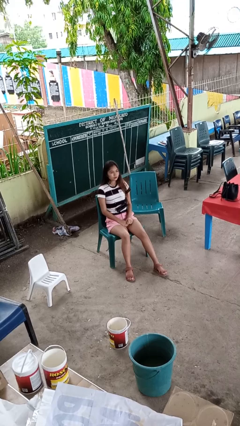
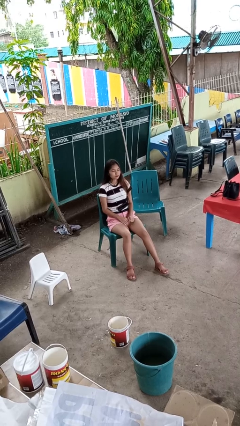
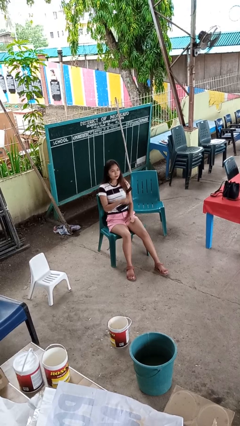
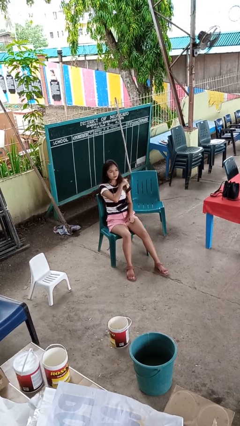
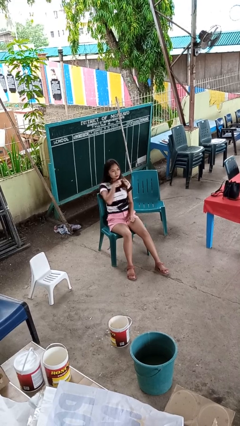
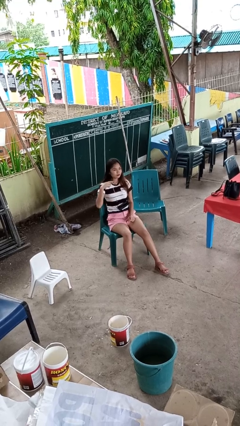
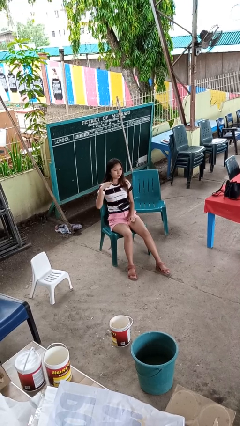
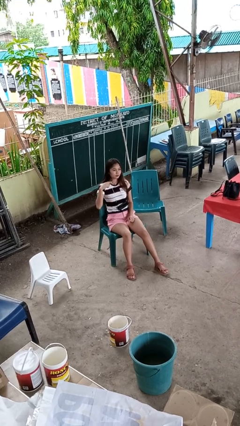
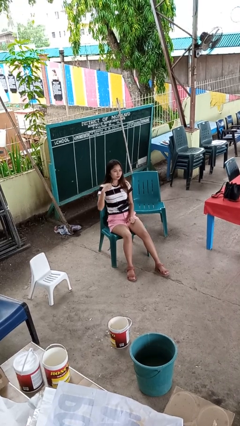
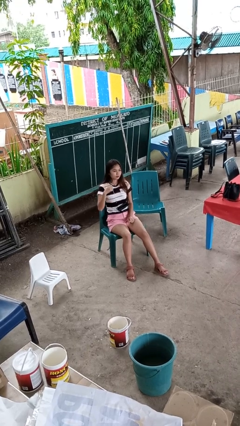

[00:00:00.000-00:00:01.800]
person gestures cut

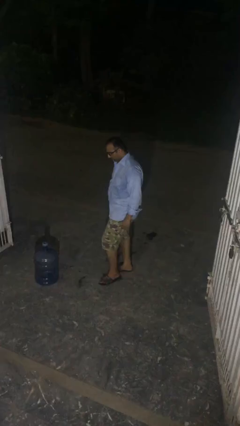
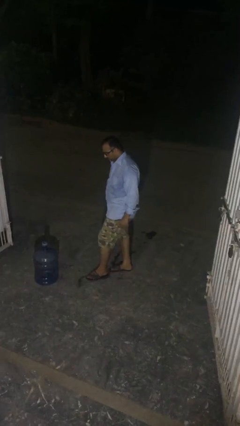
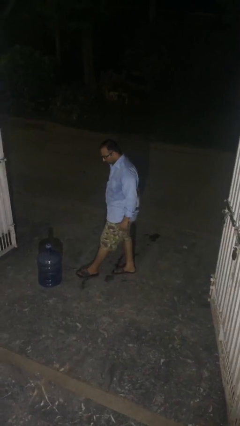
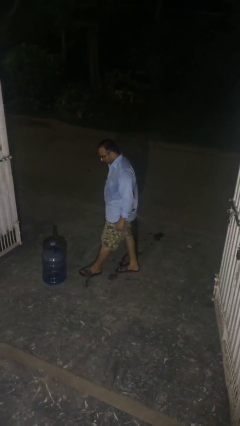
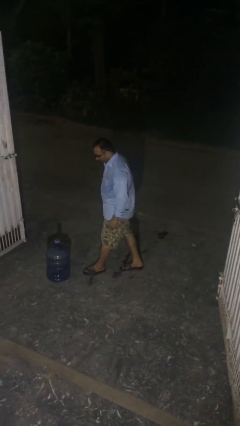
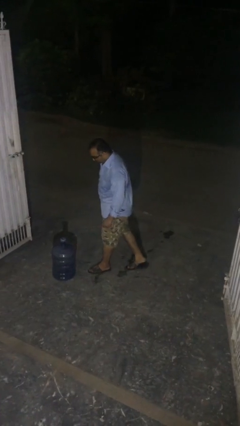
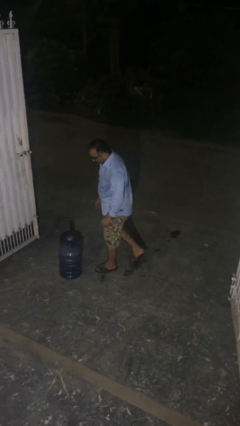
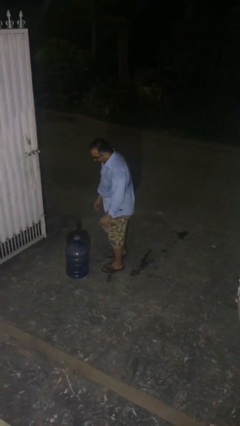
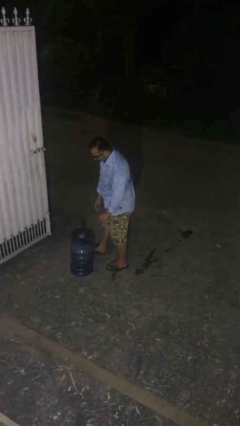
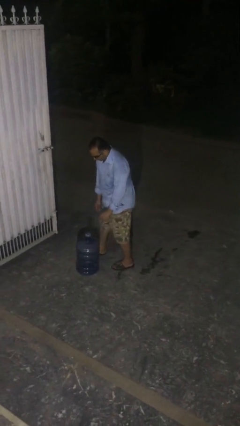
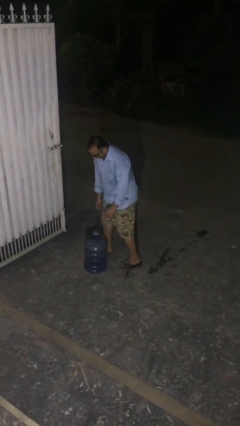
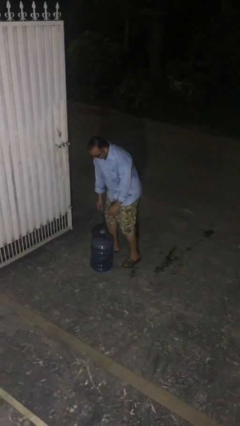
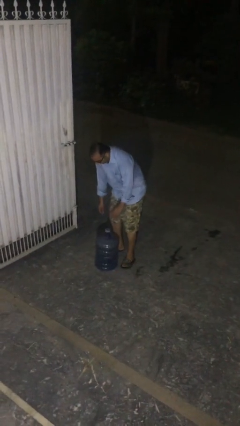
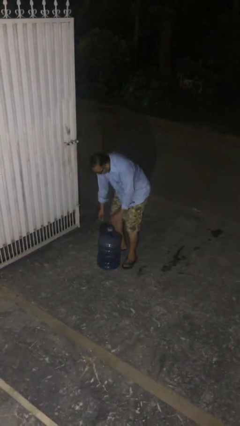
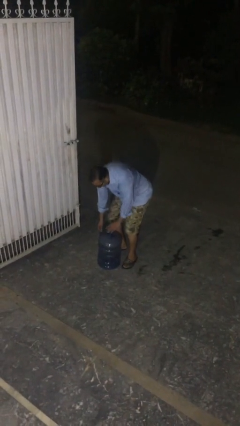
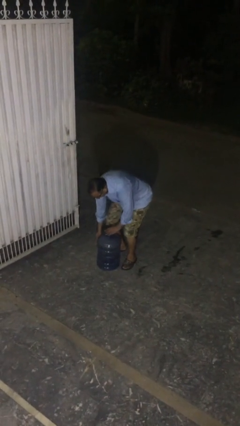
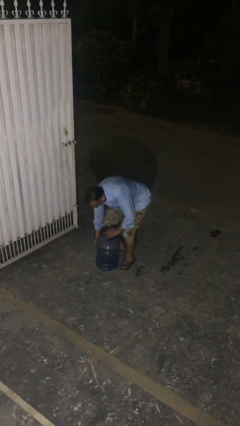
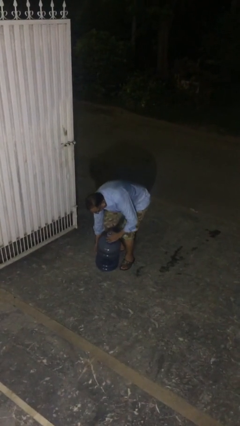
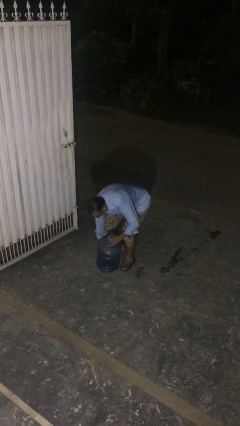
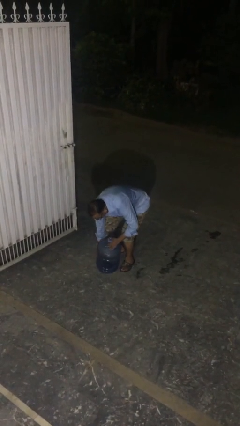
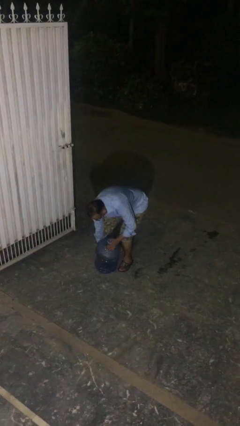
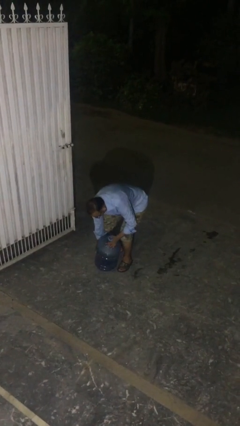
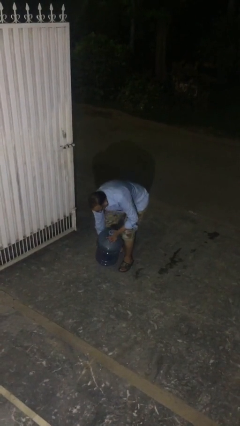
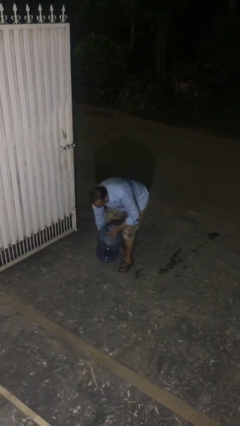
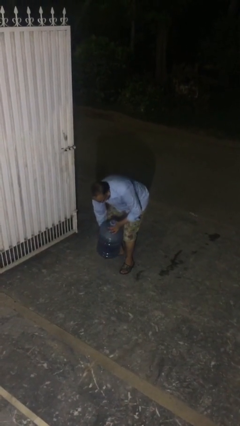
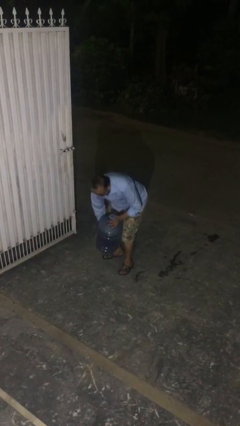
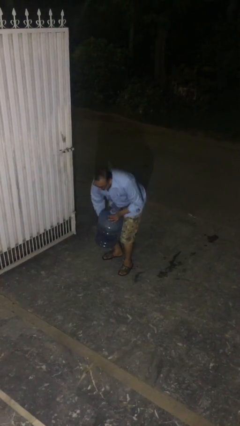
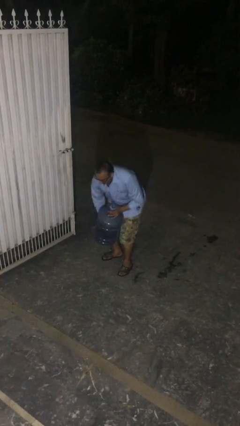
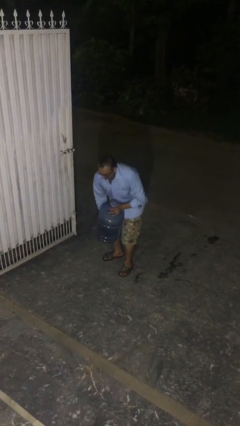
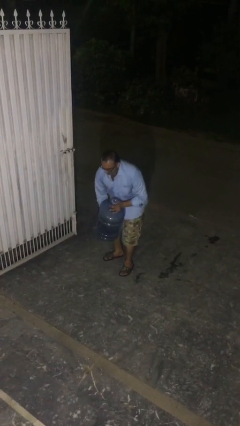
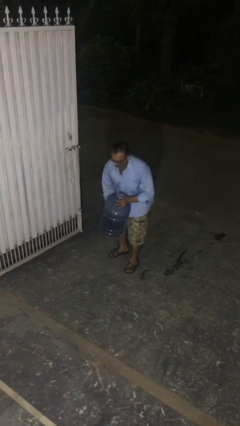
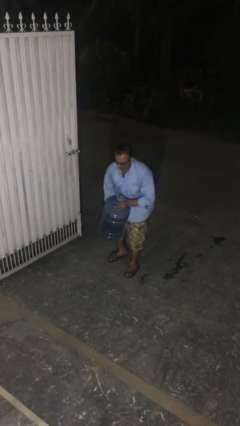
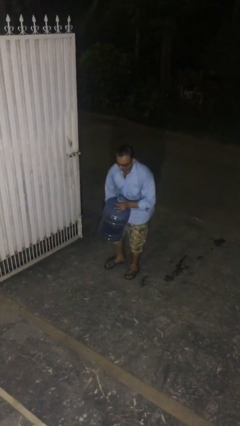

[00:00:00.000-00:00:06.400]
person picks up object from floor

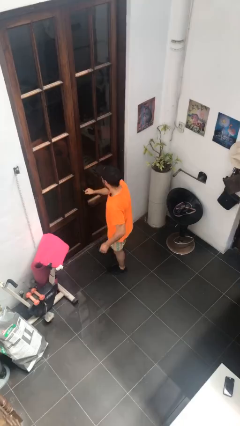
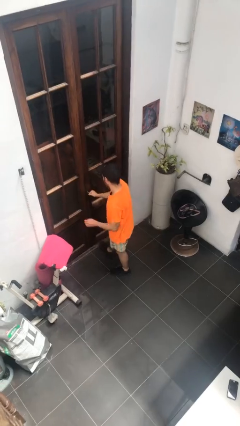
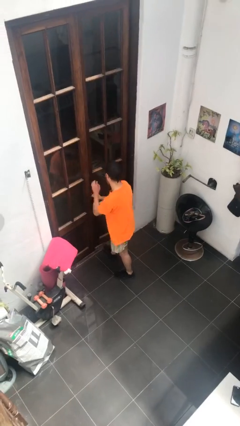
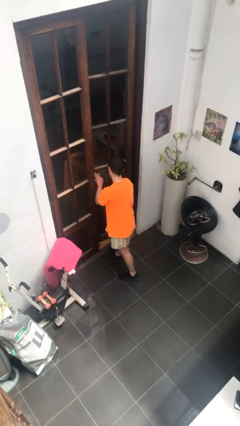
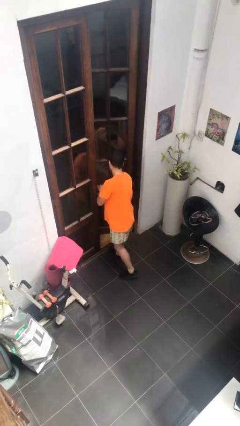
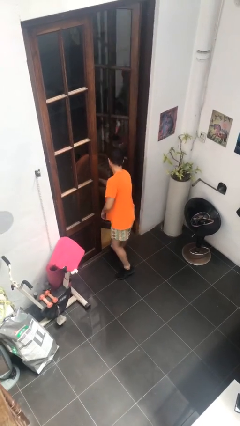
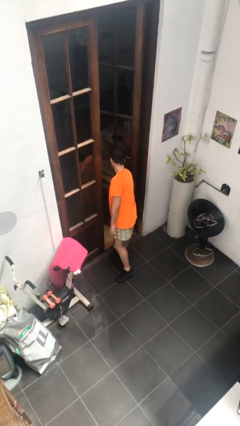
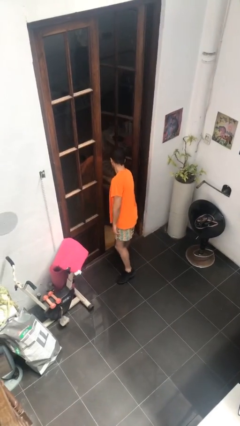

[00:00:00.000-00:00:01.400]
person opens facility door

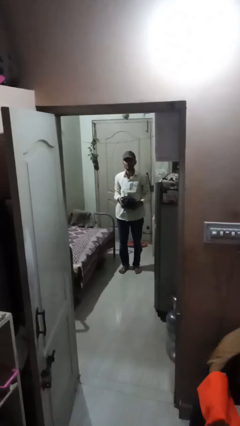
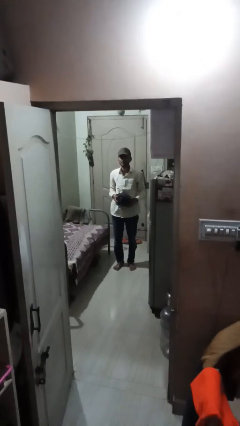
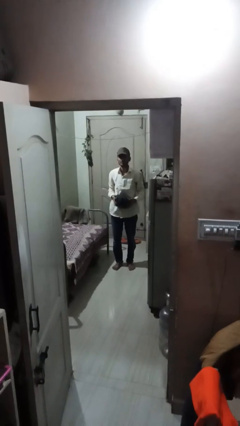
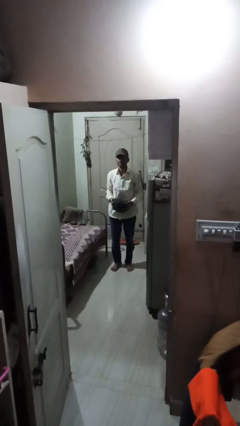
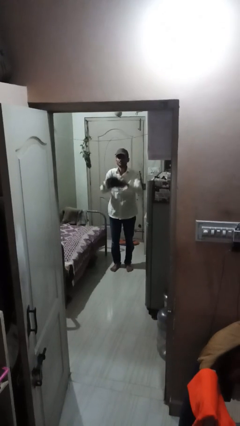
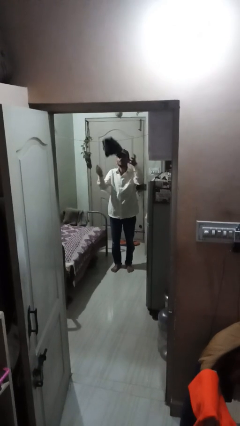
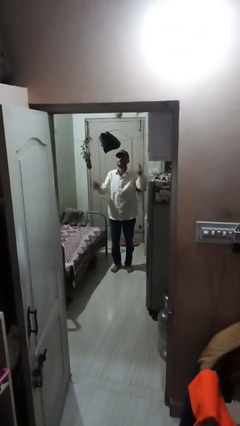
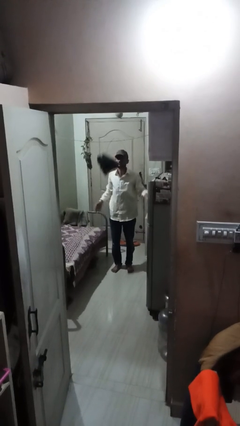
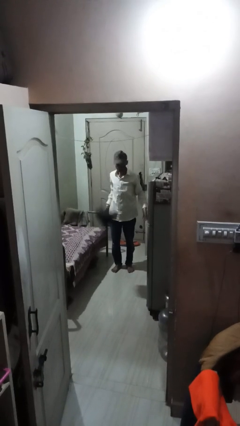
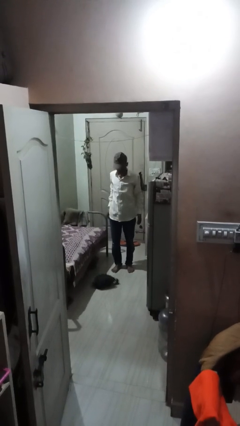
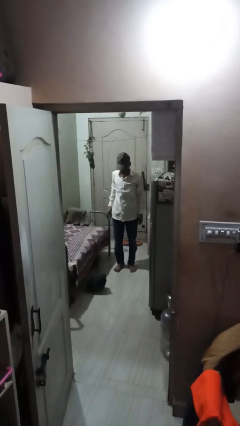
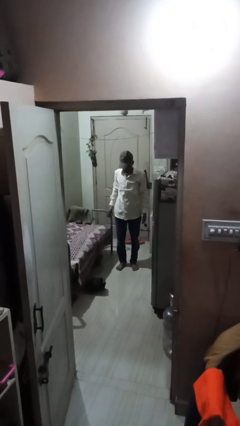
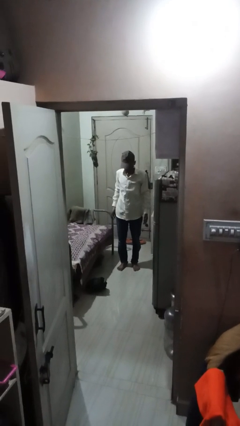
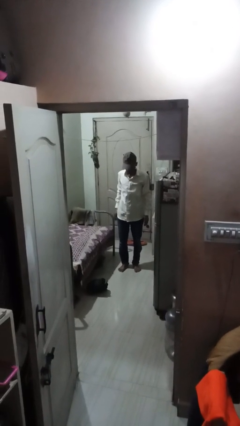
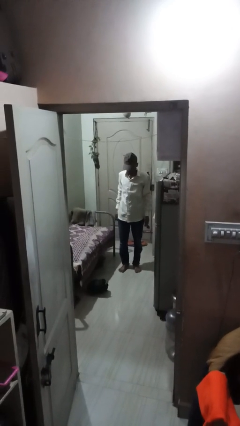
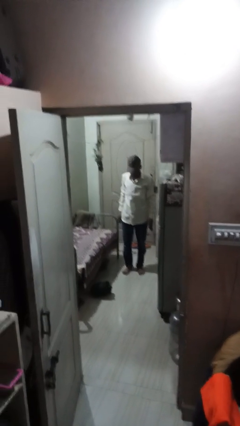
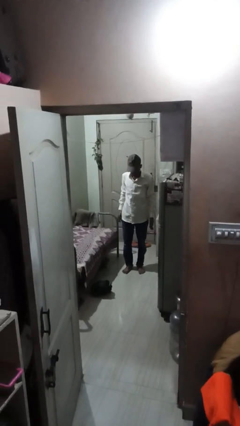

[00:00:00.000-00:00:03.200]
person throws object into air

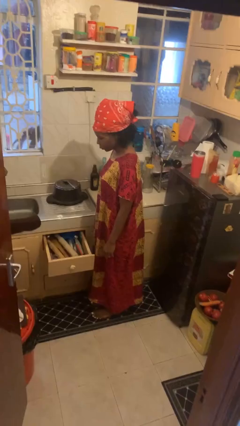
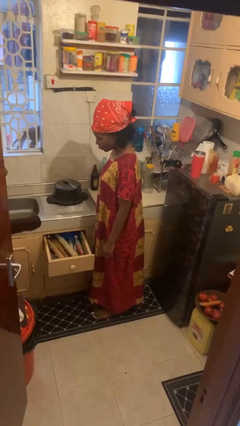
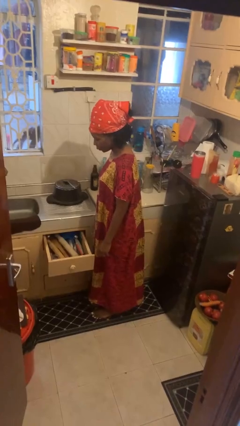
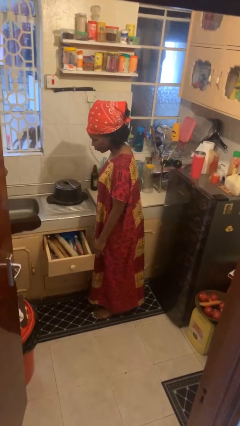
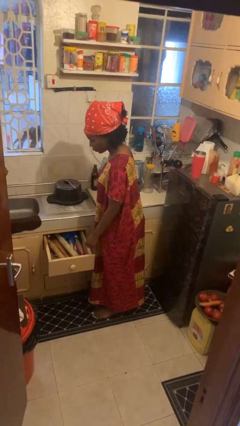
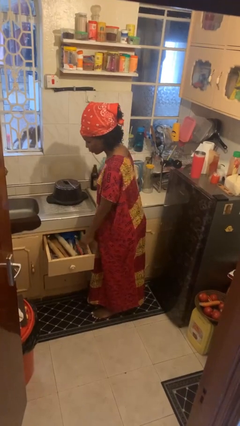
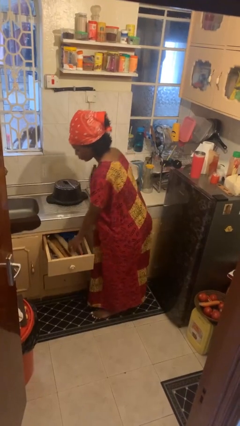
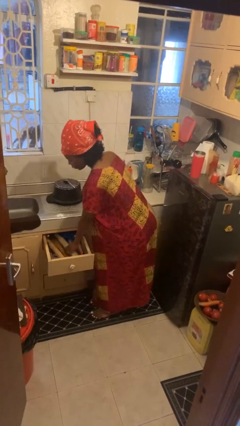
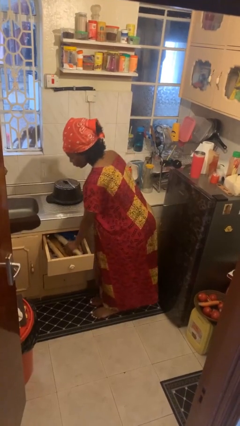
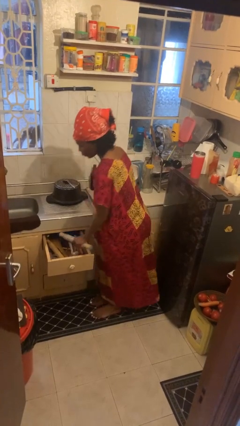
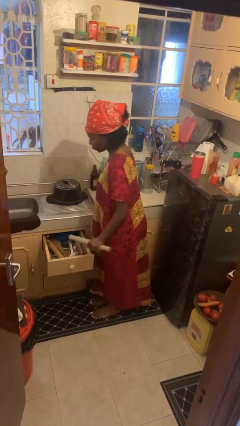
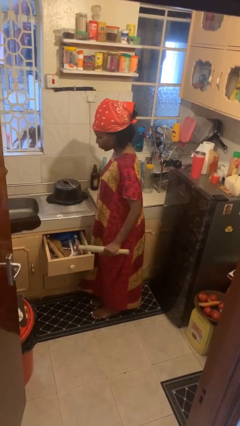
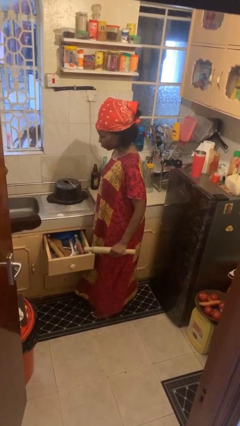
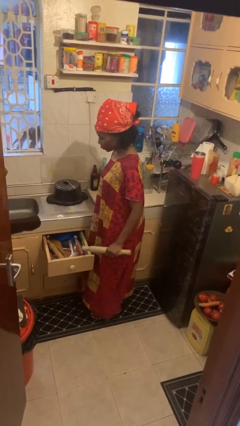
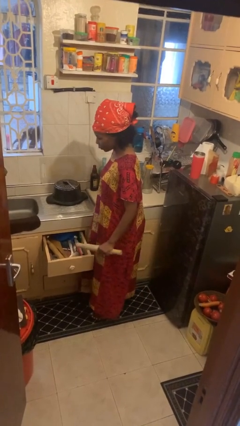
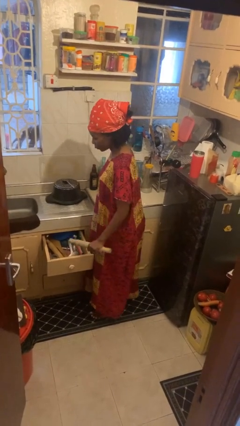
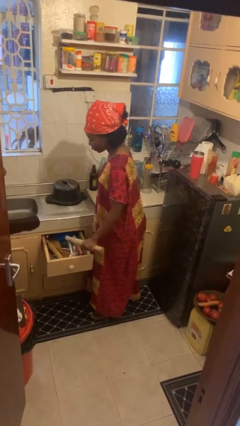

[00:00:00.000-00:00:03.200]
person takes object from kitchen drawer

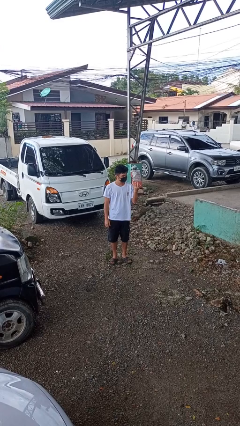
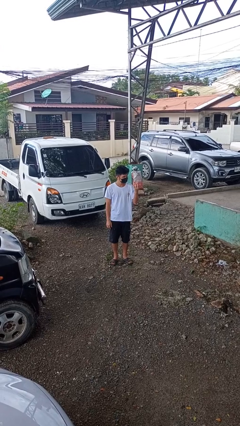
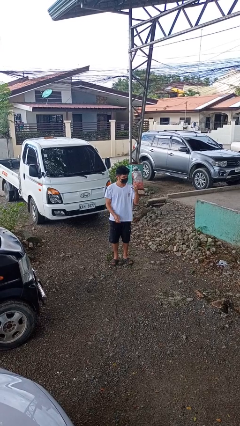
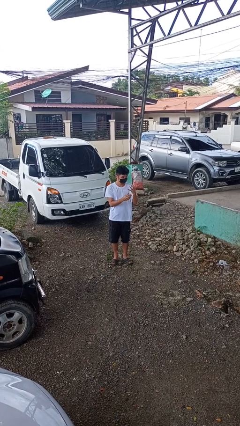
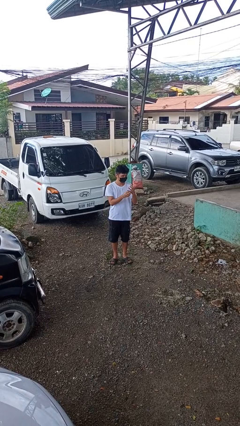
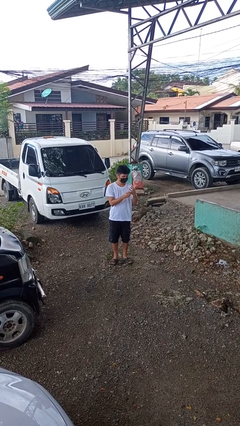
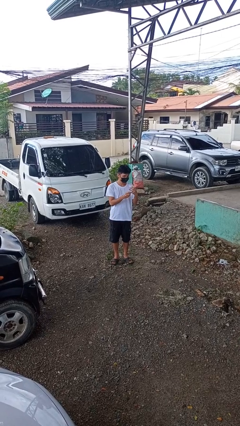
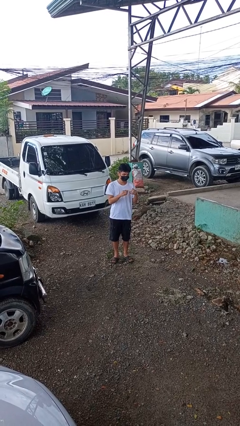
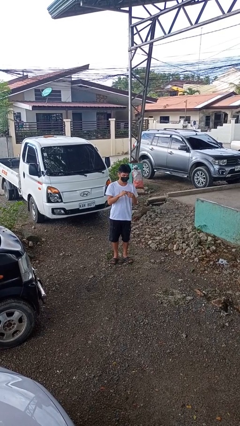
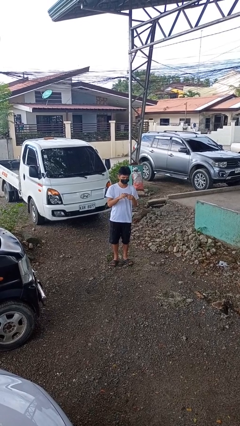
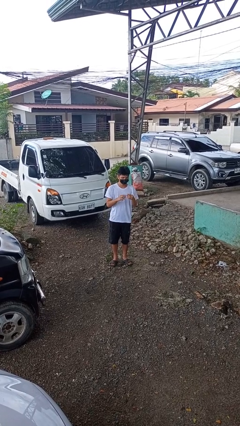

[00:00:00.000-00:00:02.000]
person takes off ring
